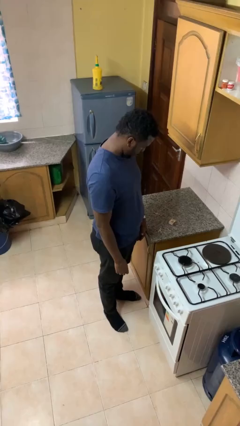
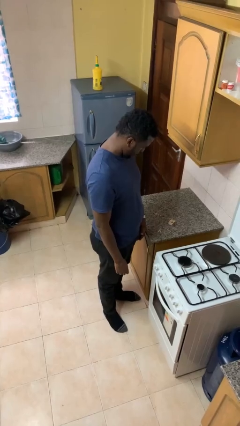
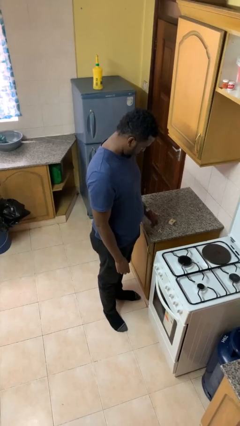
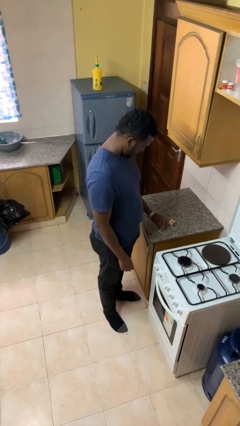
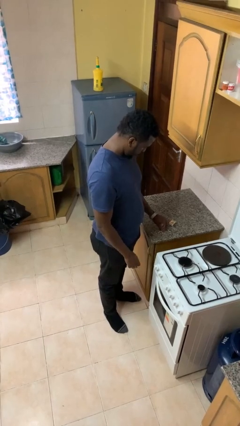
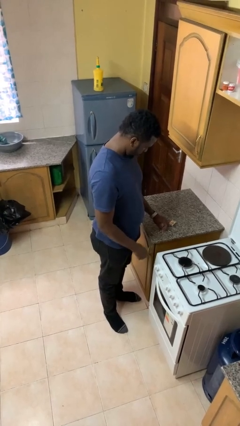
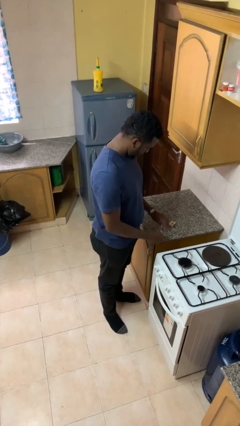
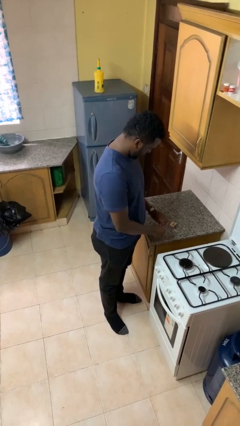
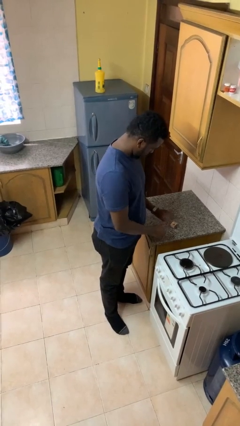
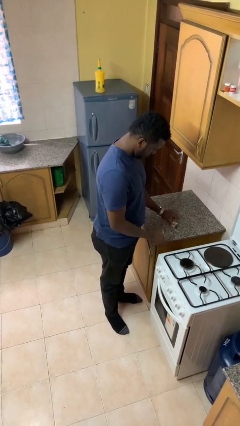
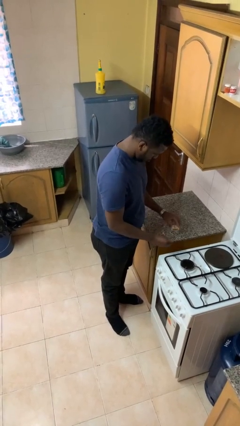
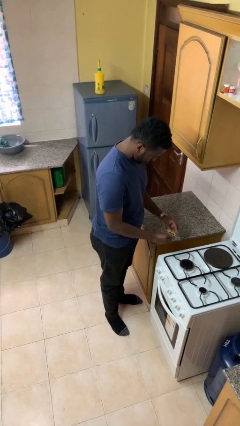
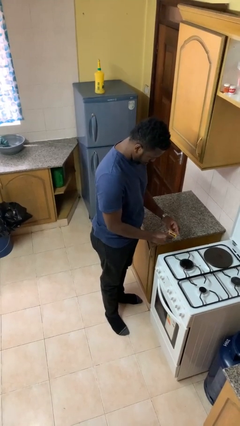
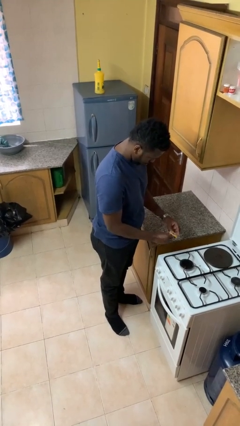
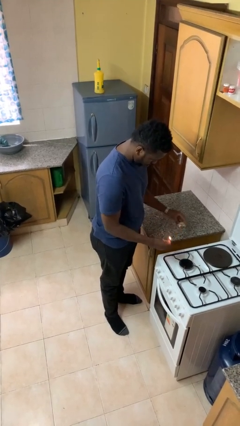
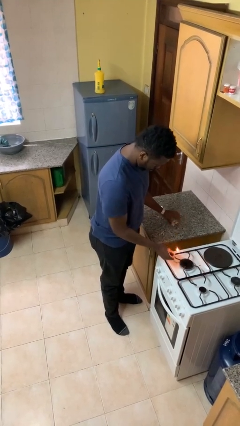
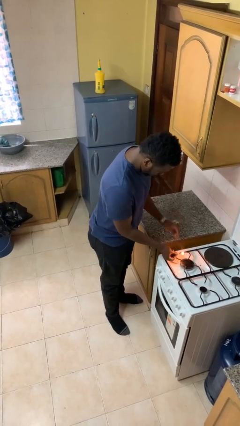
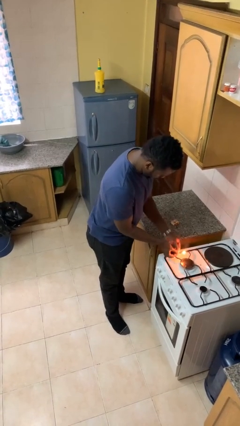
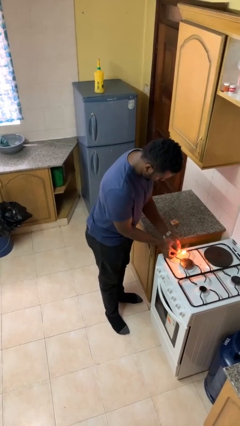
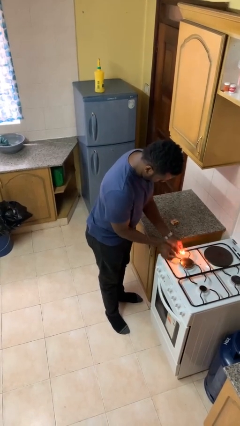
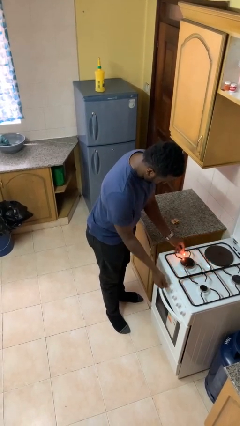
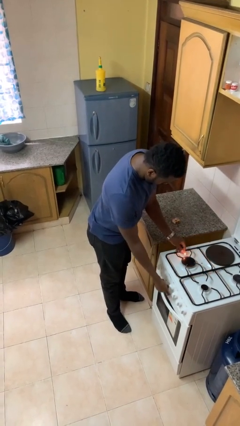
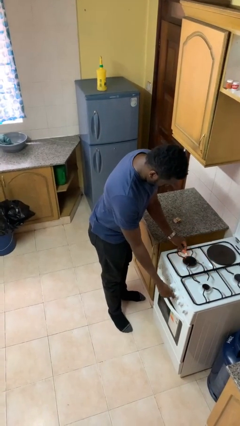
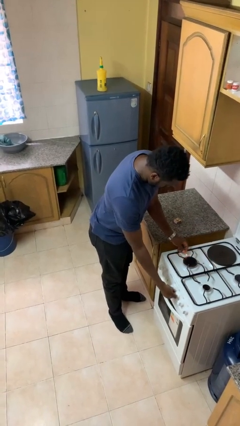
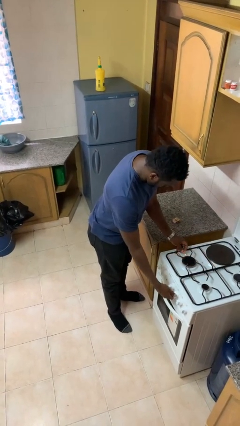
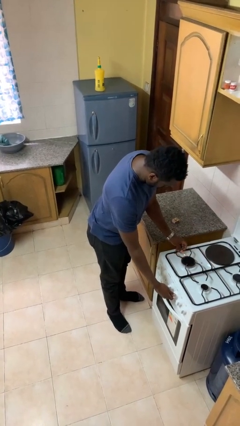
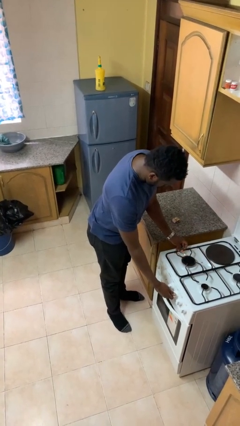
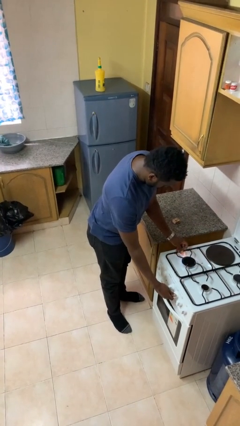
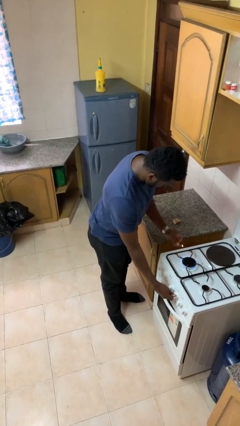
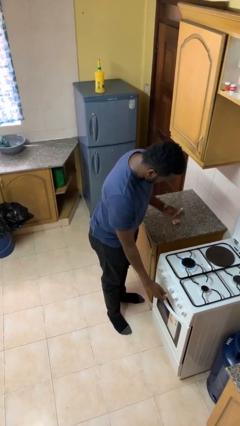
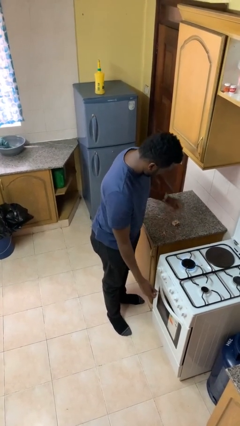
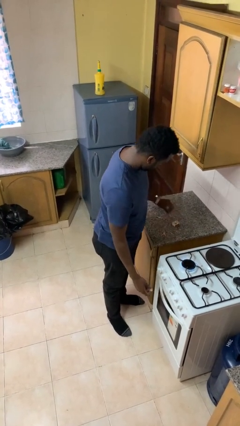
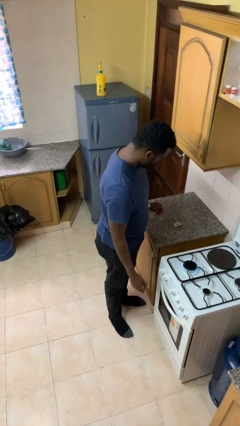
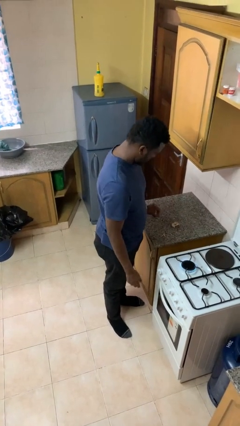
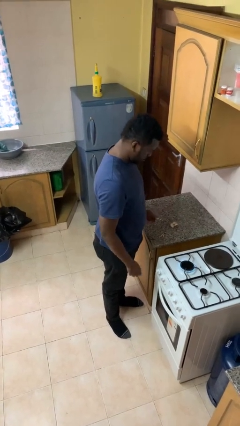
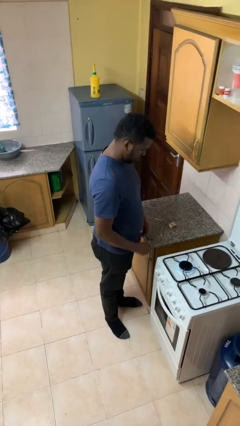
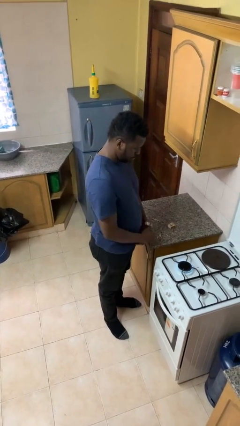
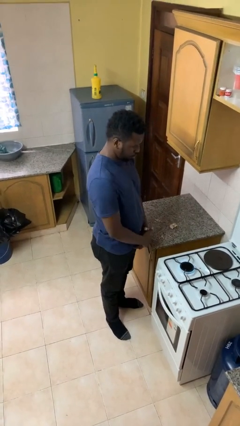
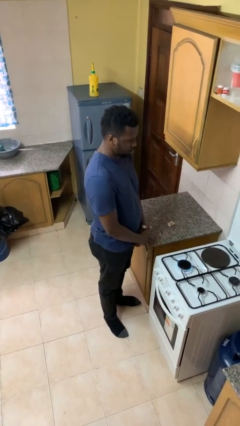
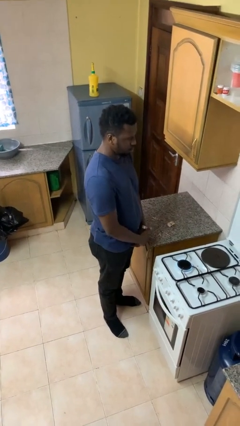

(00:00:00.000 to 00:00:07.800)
person turns on stovetop

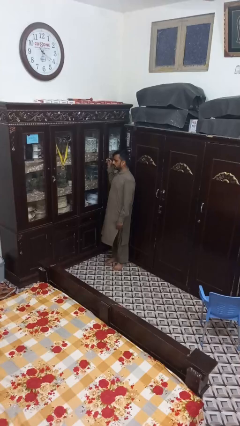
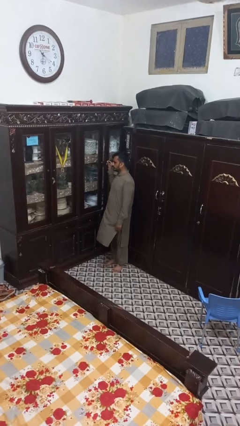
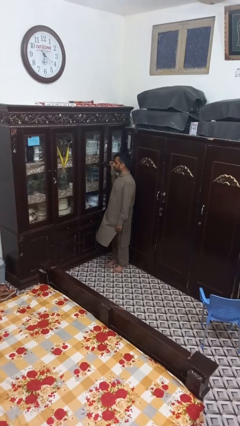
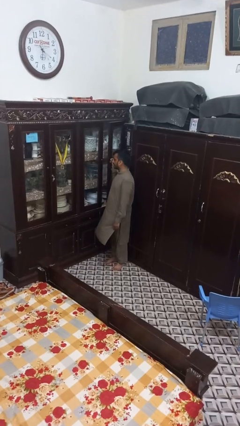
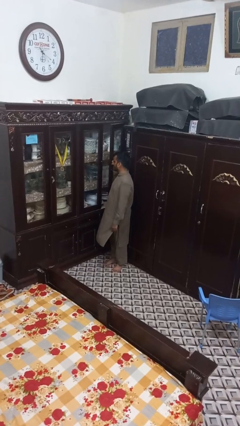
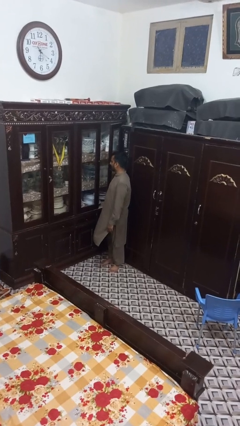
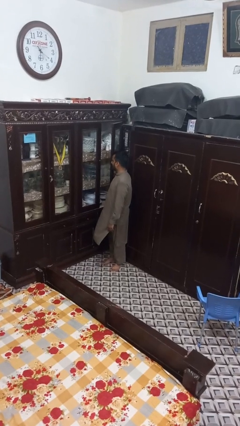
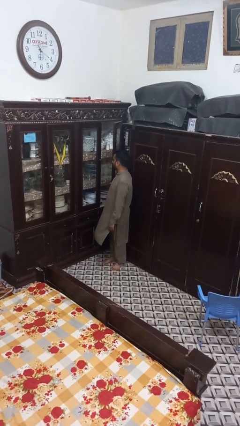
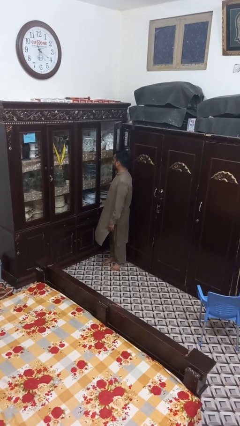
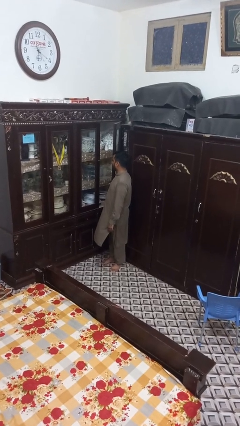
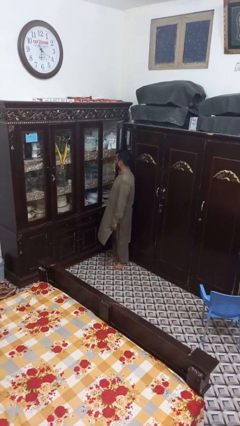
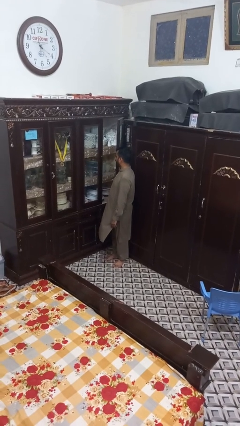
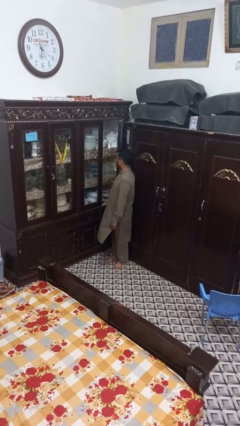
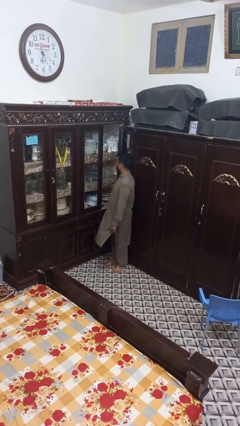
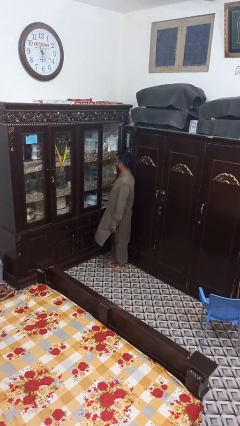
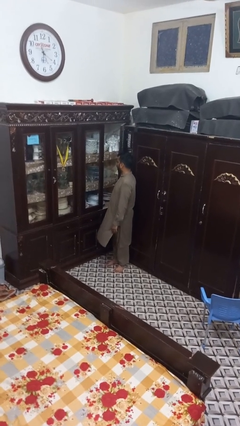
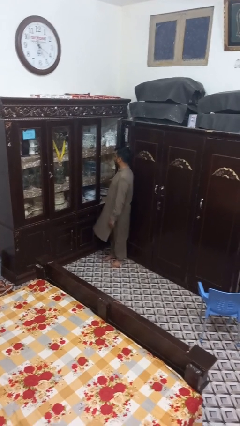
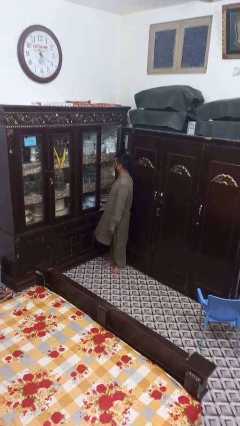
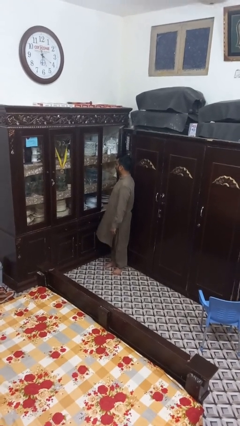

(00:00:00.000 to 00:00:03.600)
person opens cabinet

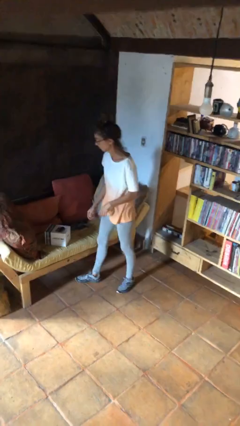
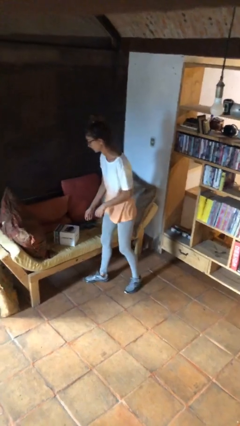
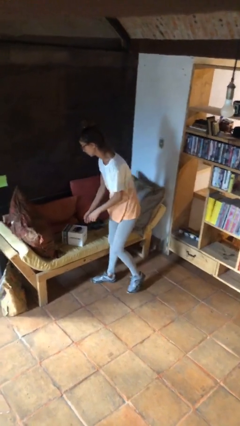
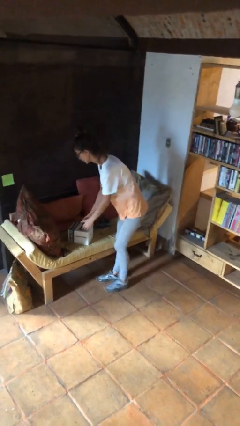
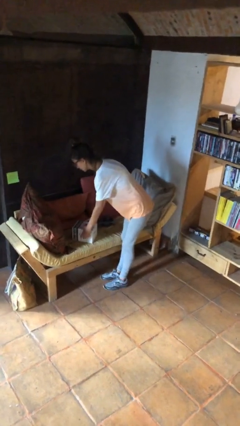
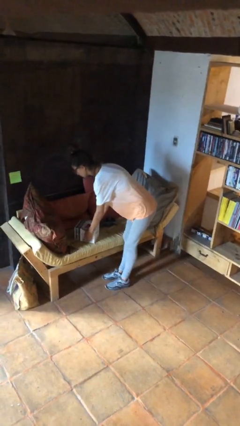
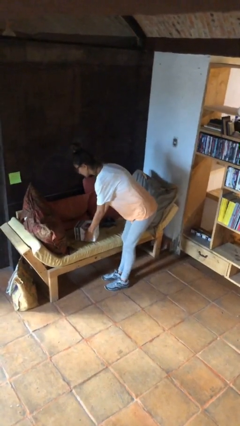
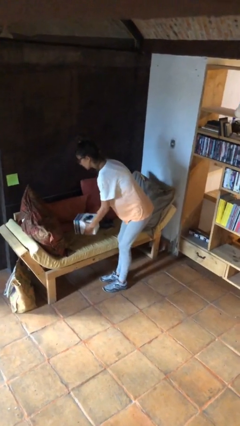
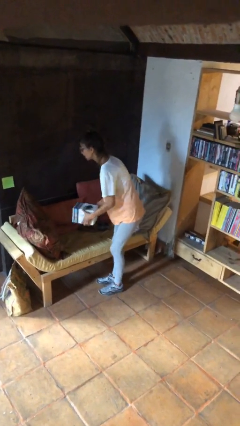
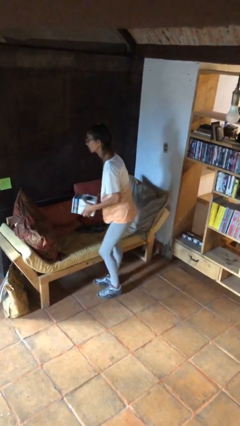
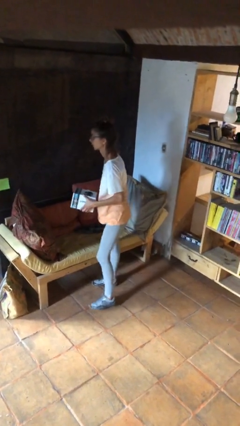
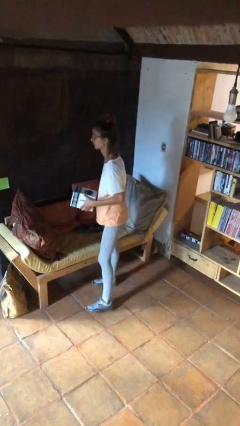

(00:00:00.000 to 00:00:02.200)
person picks up object from couch

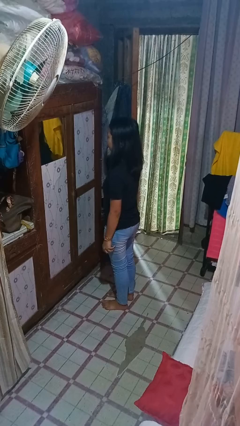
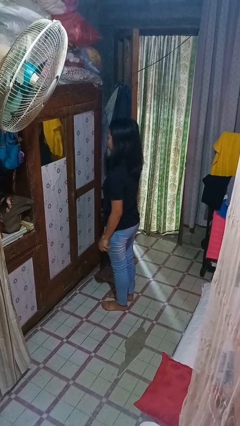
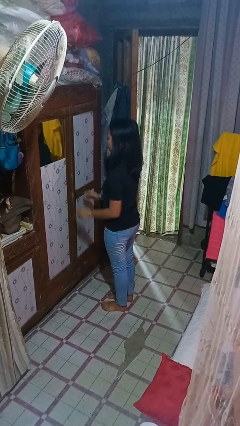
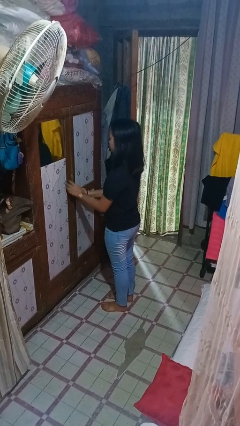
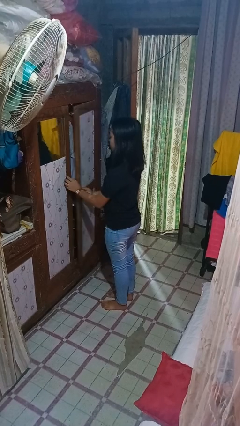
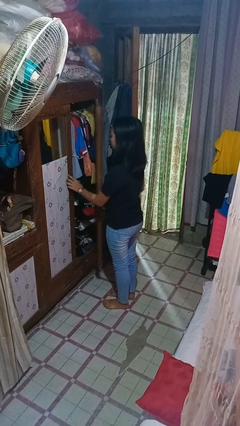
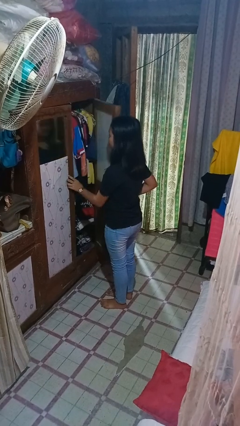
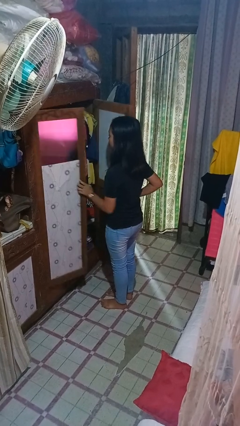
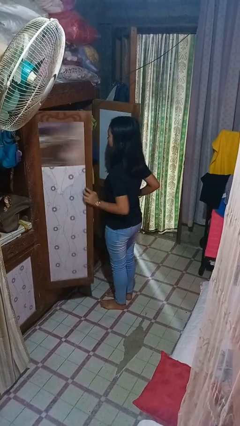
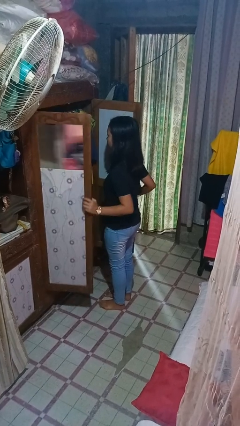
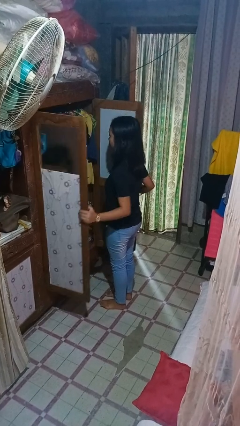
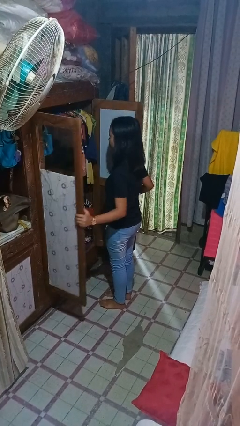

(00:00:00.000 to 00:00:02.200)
person opens closet door

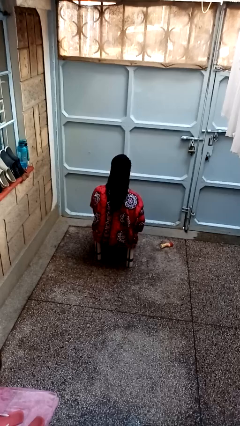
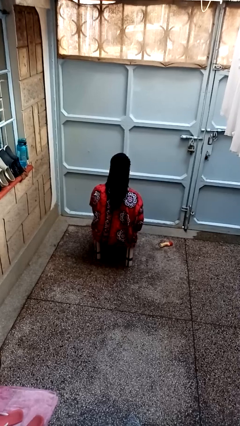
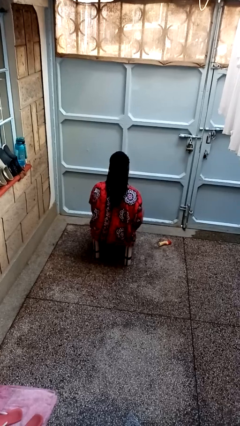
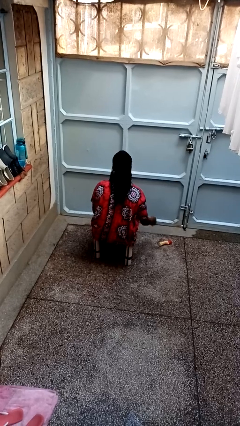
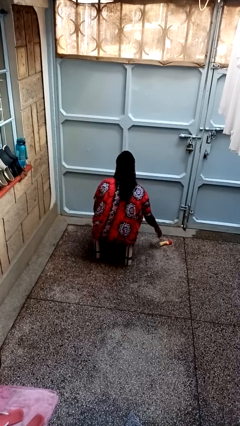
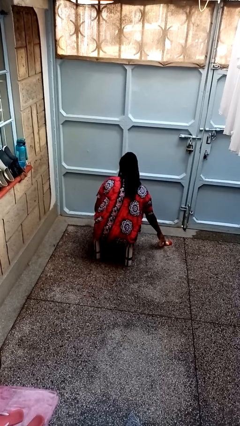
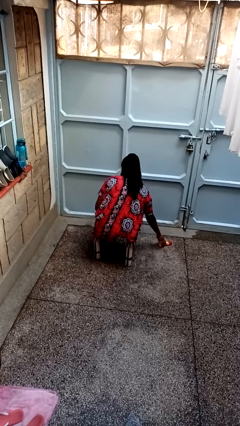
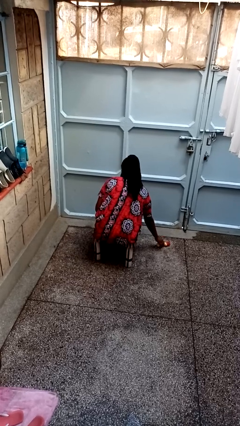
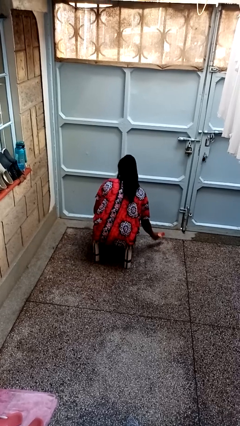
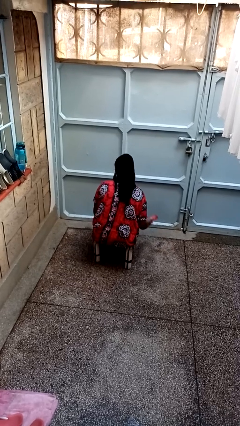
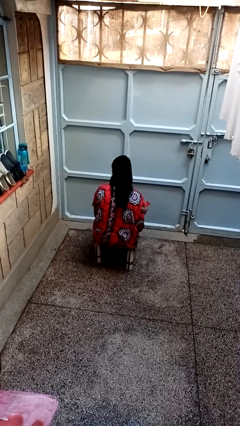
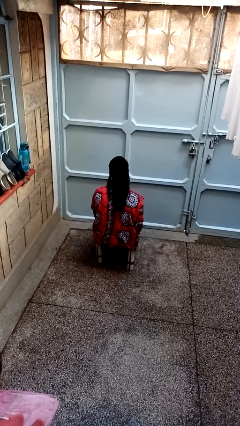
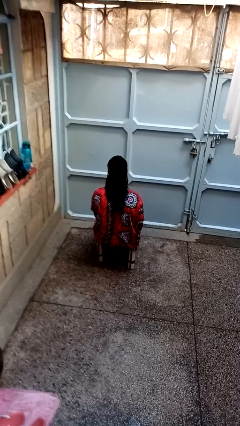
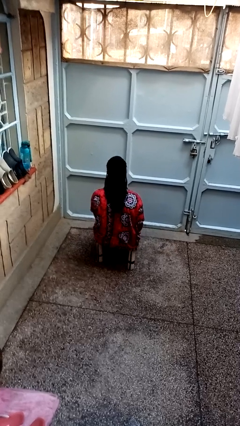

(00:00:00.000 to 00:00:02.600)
person picks up object from floor
